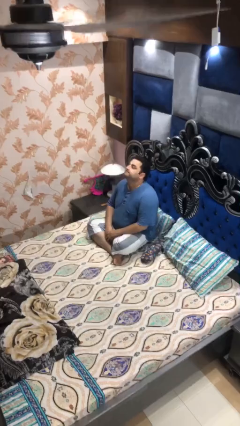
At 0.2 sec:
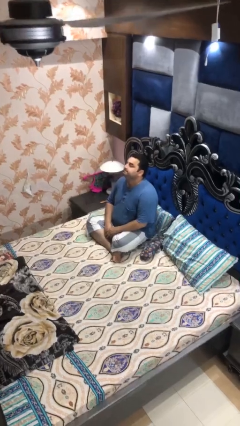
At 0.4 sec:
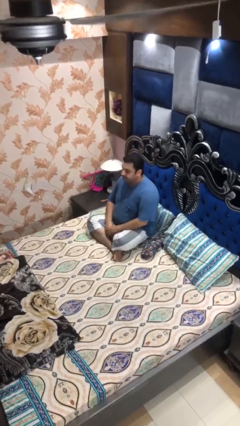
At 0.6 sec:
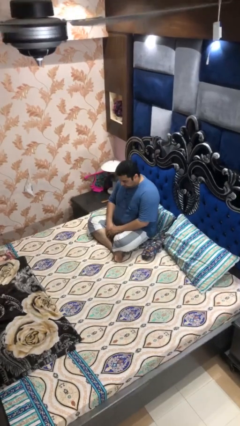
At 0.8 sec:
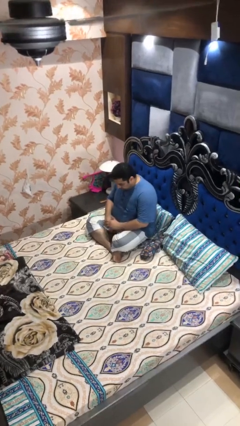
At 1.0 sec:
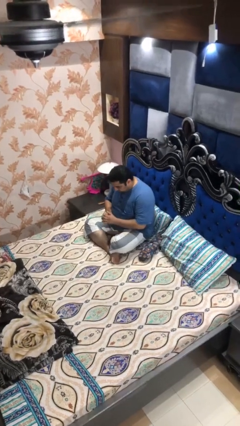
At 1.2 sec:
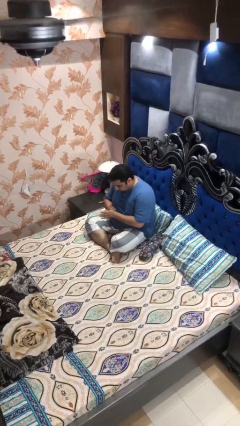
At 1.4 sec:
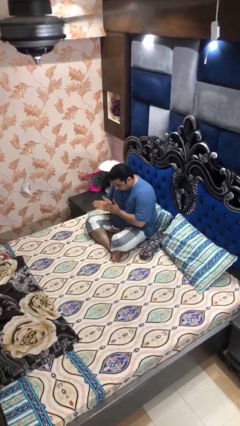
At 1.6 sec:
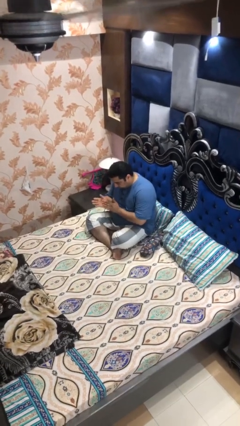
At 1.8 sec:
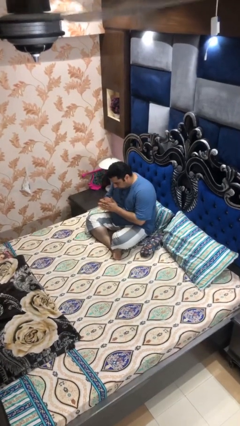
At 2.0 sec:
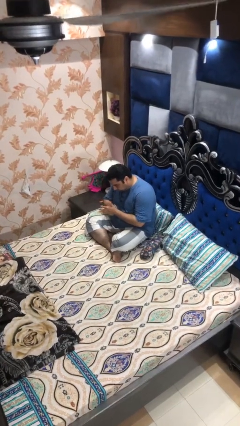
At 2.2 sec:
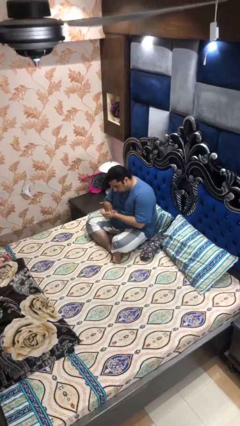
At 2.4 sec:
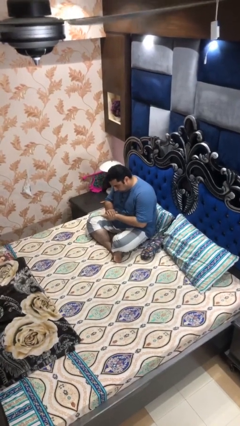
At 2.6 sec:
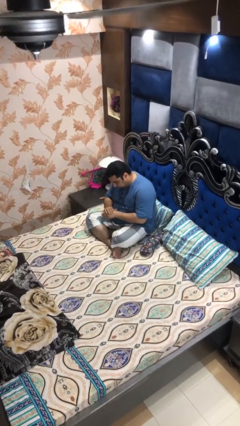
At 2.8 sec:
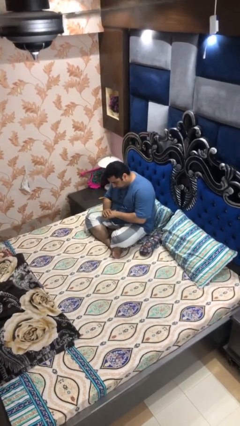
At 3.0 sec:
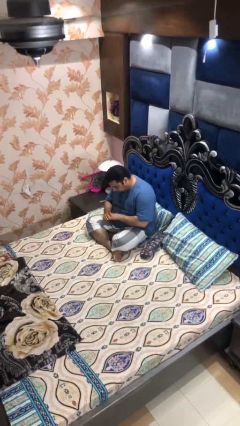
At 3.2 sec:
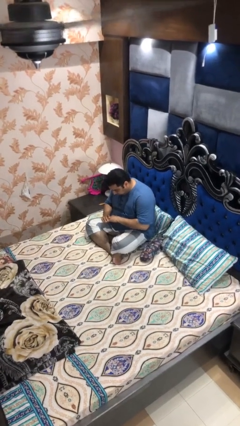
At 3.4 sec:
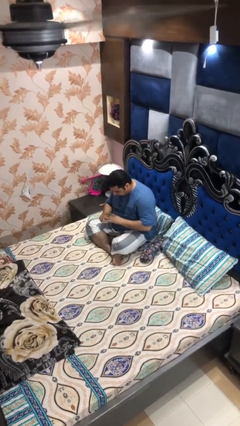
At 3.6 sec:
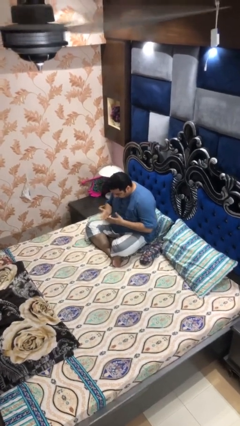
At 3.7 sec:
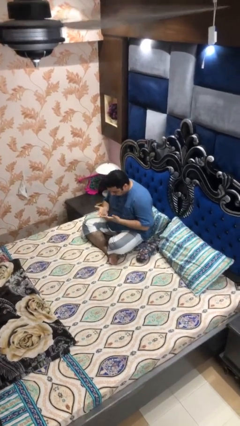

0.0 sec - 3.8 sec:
person looks at hands in lap

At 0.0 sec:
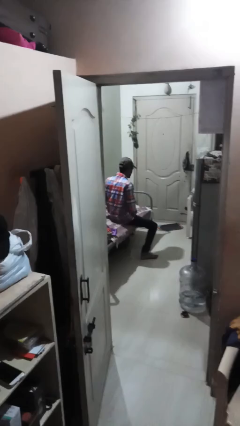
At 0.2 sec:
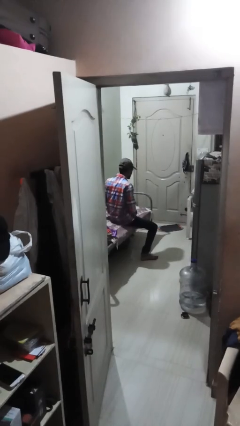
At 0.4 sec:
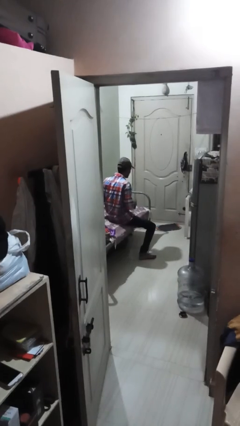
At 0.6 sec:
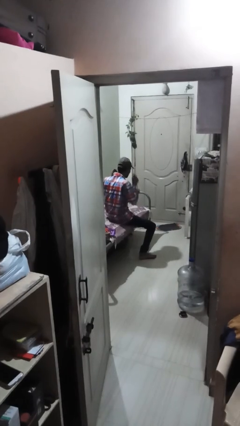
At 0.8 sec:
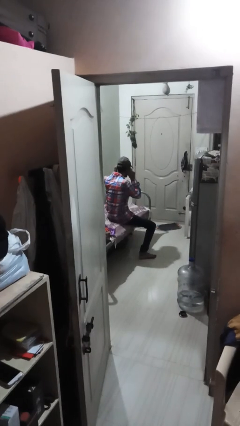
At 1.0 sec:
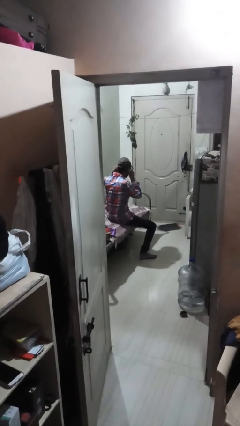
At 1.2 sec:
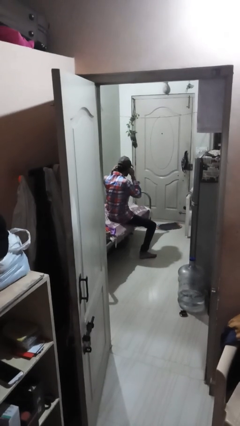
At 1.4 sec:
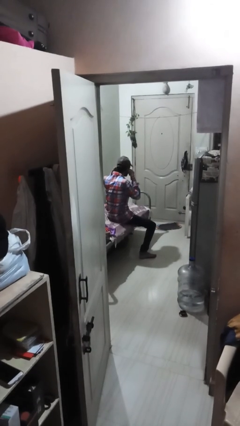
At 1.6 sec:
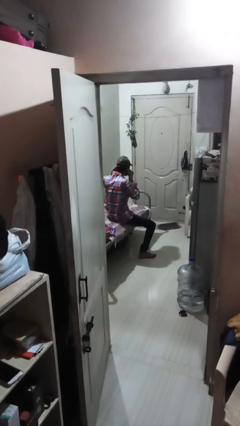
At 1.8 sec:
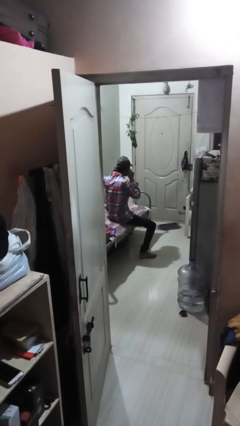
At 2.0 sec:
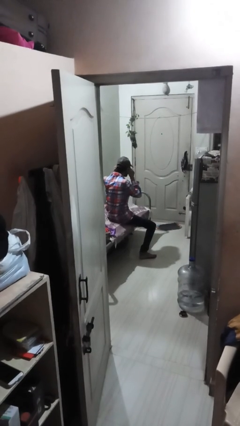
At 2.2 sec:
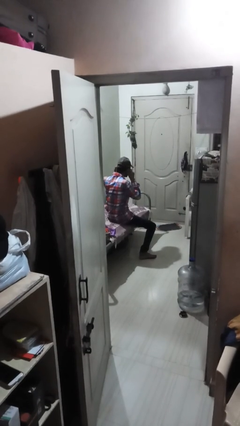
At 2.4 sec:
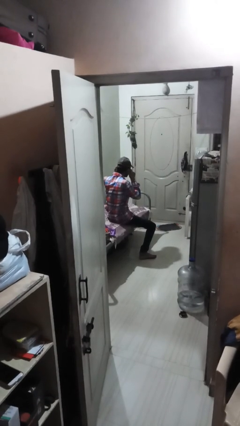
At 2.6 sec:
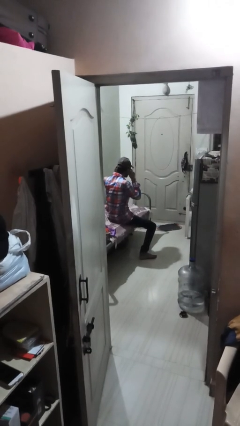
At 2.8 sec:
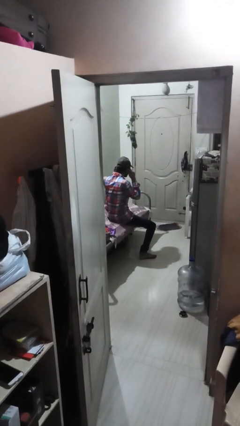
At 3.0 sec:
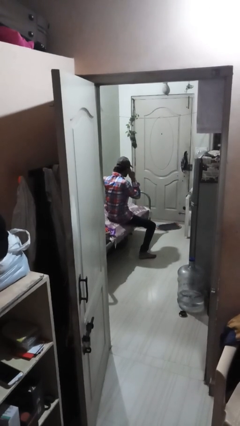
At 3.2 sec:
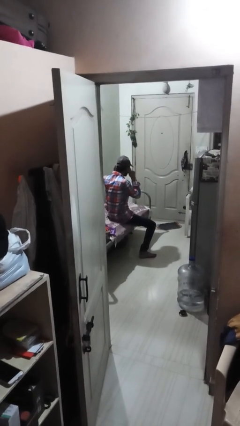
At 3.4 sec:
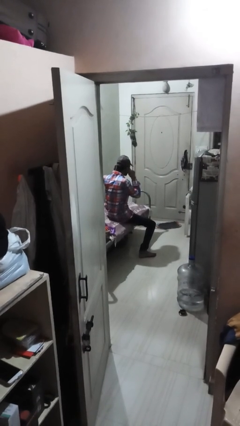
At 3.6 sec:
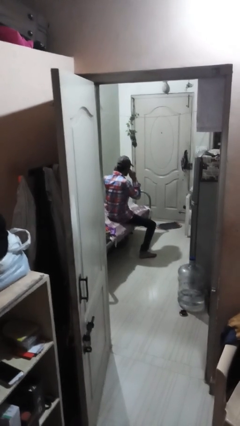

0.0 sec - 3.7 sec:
person touches earlobe

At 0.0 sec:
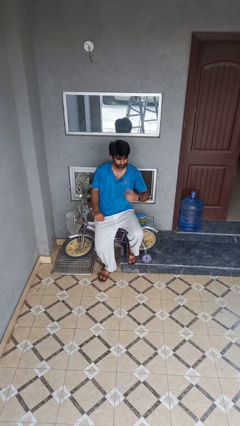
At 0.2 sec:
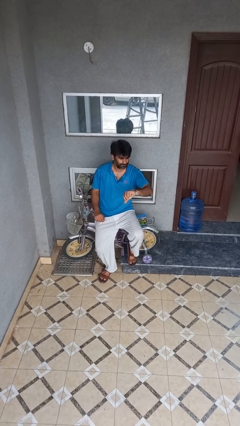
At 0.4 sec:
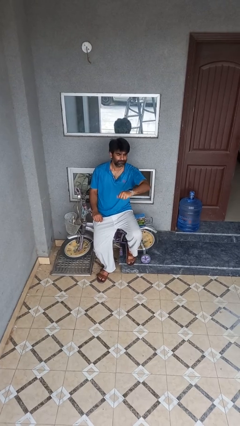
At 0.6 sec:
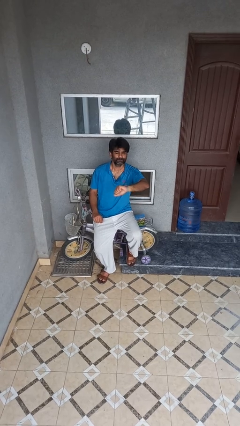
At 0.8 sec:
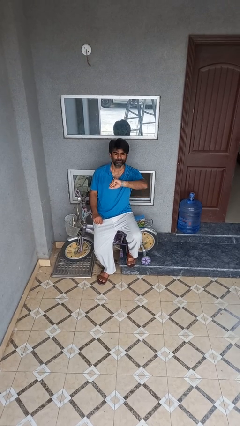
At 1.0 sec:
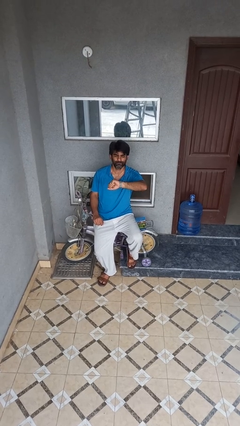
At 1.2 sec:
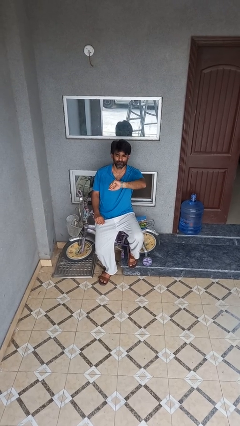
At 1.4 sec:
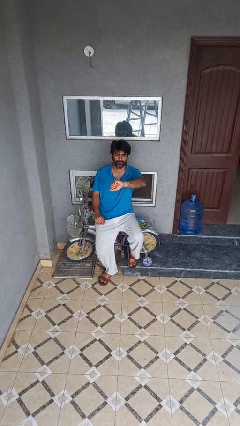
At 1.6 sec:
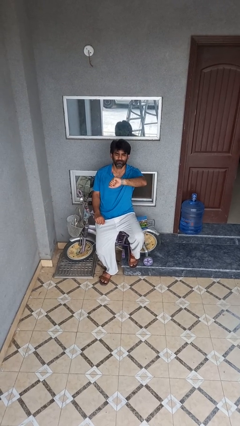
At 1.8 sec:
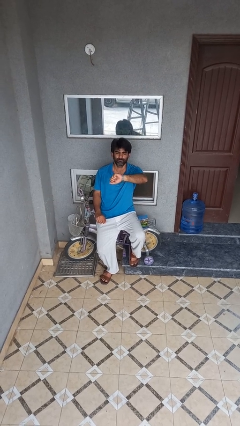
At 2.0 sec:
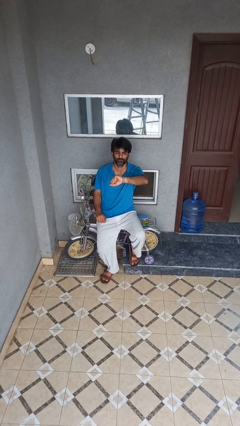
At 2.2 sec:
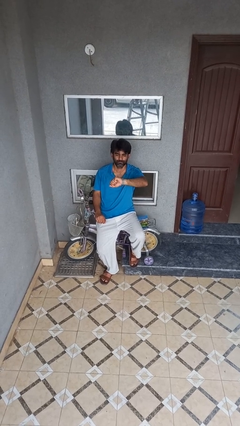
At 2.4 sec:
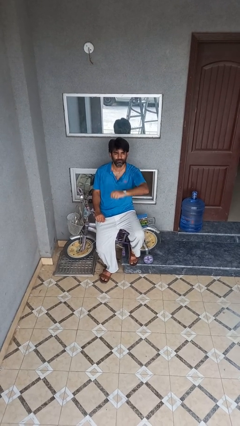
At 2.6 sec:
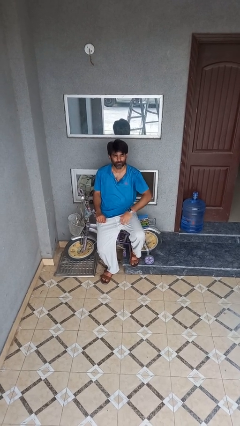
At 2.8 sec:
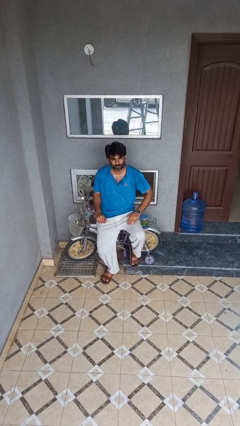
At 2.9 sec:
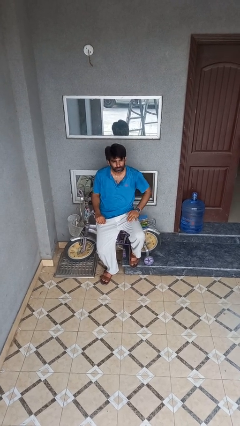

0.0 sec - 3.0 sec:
person looks at wristwatch

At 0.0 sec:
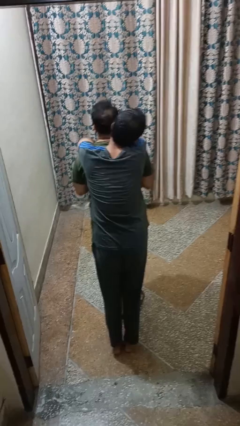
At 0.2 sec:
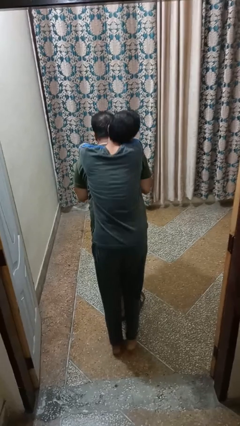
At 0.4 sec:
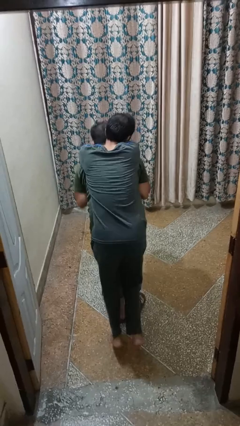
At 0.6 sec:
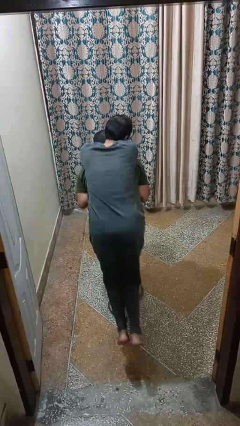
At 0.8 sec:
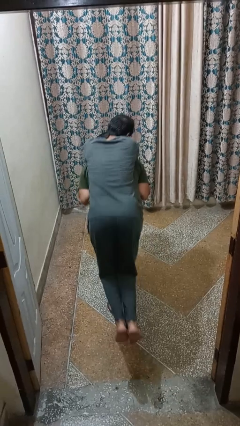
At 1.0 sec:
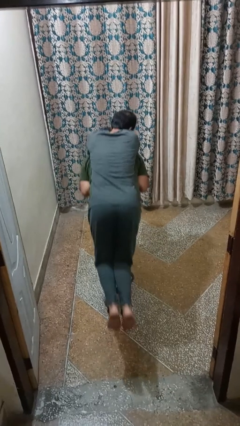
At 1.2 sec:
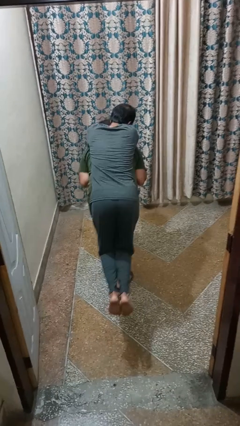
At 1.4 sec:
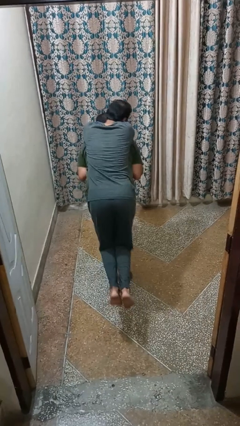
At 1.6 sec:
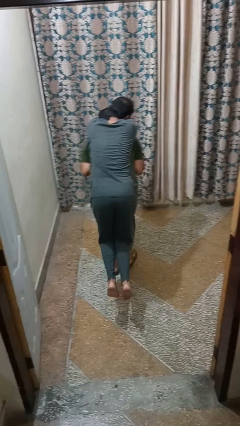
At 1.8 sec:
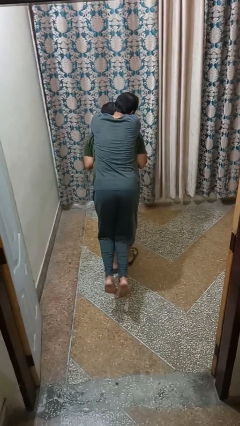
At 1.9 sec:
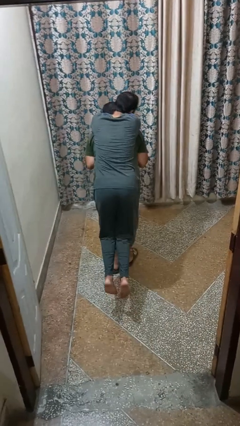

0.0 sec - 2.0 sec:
person carries person on back

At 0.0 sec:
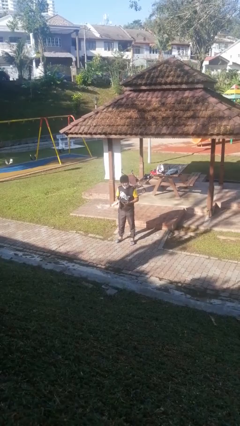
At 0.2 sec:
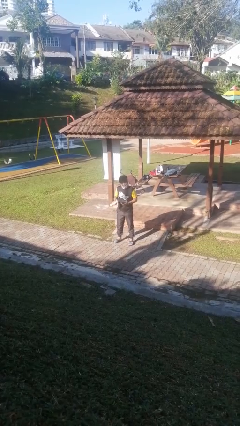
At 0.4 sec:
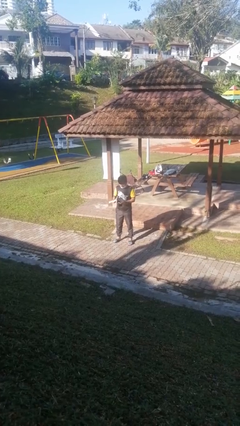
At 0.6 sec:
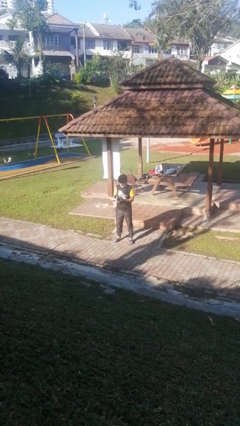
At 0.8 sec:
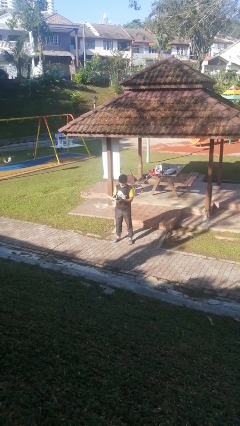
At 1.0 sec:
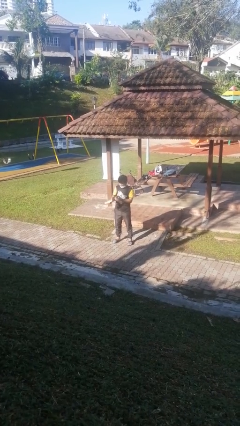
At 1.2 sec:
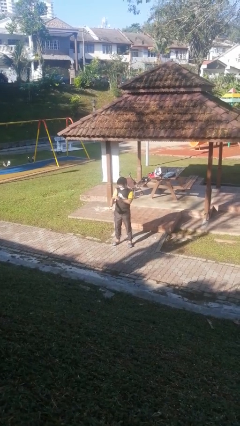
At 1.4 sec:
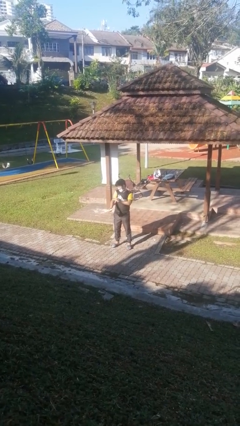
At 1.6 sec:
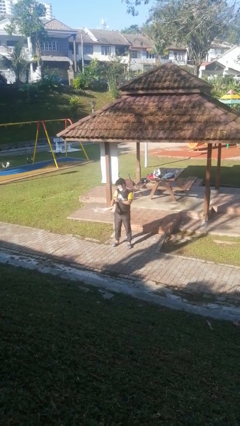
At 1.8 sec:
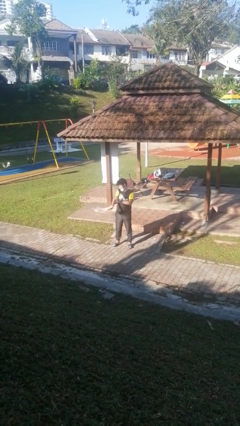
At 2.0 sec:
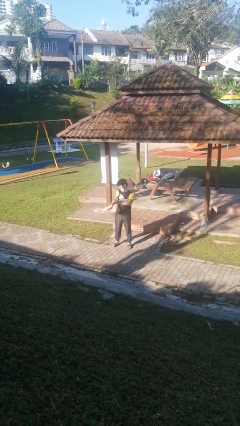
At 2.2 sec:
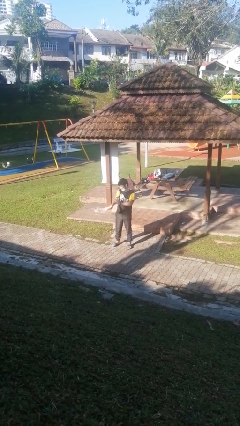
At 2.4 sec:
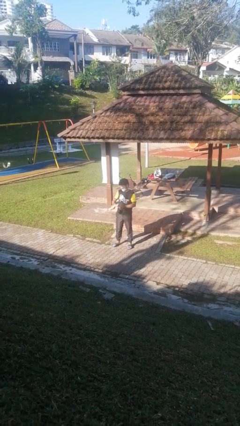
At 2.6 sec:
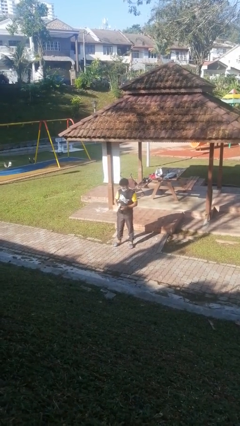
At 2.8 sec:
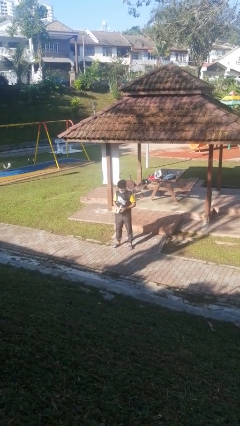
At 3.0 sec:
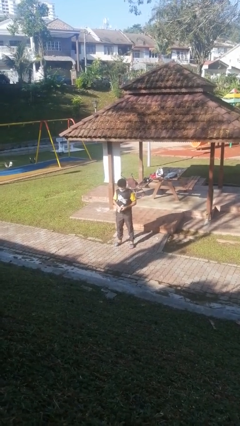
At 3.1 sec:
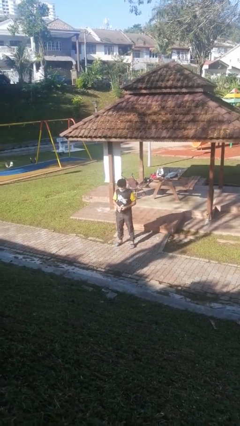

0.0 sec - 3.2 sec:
person applies sunscreen

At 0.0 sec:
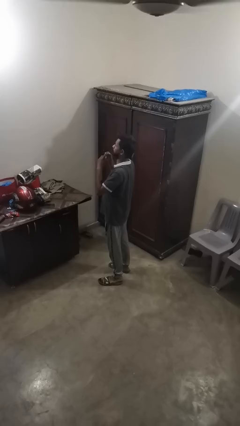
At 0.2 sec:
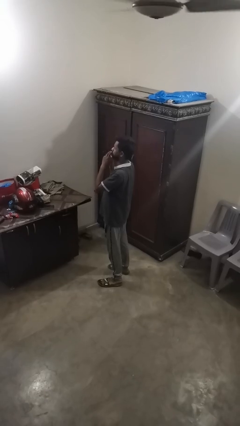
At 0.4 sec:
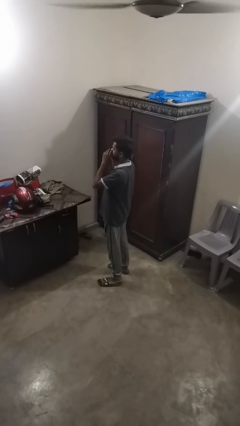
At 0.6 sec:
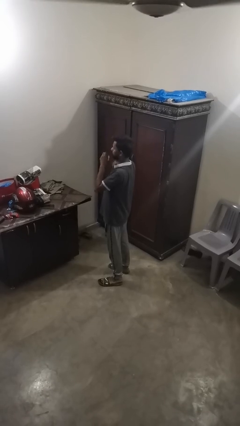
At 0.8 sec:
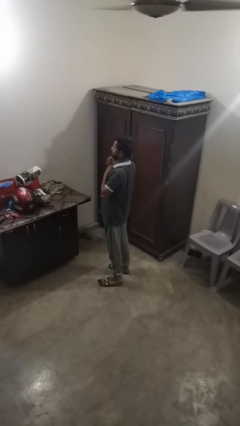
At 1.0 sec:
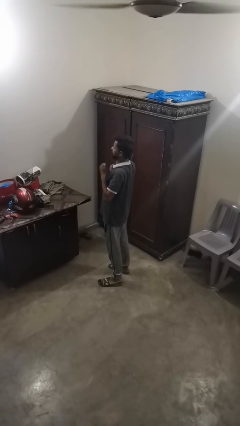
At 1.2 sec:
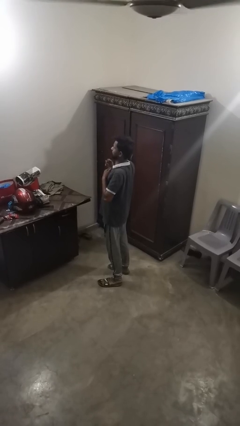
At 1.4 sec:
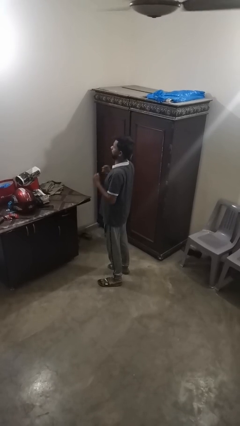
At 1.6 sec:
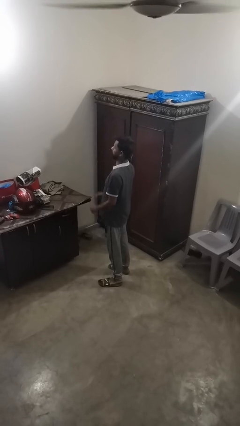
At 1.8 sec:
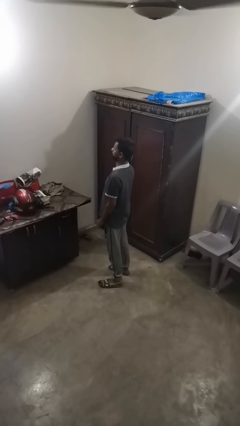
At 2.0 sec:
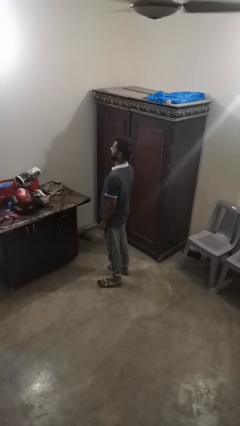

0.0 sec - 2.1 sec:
person drums on chest
